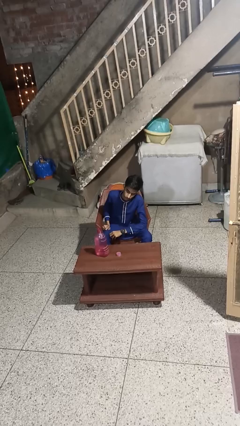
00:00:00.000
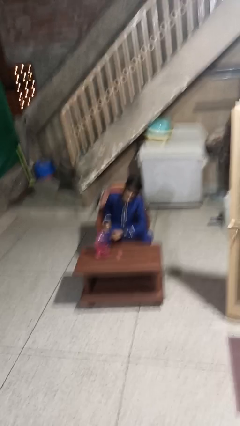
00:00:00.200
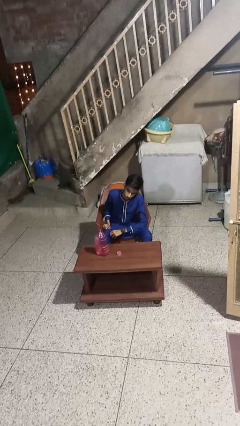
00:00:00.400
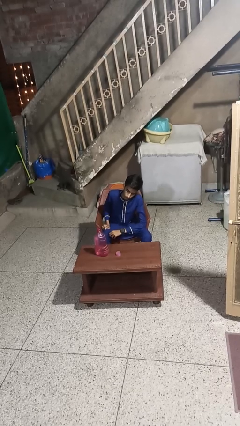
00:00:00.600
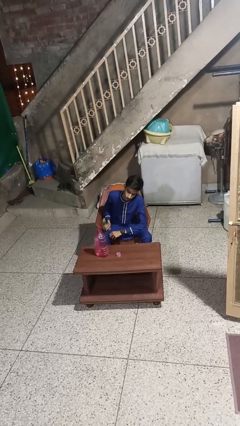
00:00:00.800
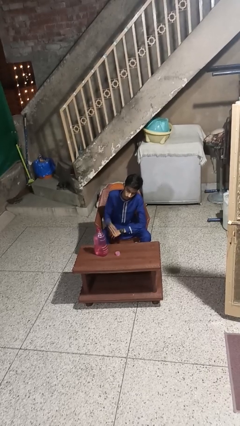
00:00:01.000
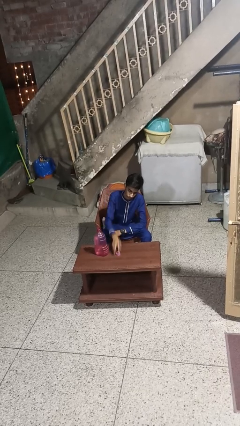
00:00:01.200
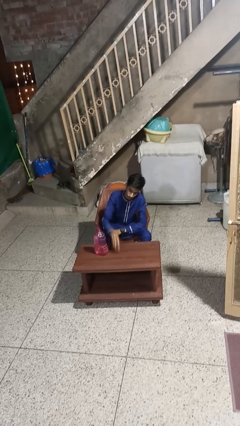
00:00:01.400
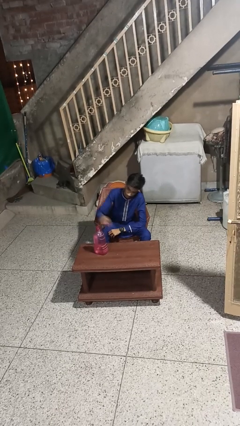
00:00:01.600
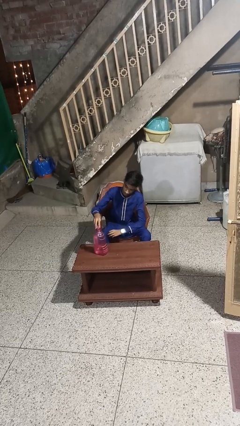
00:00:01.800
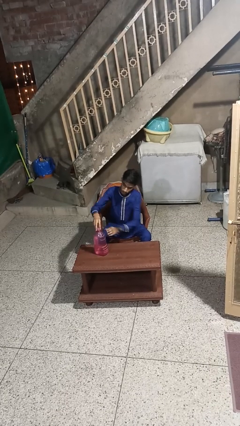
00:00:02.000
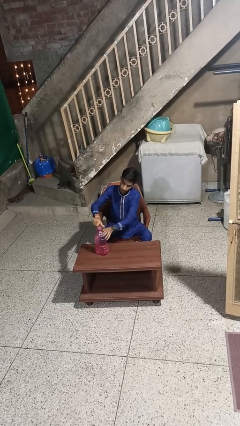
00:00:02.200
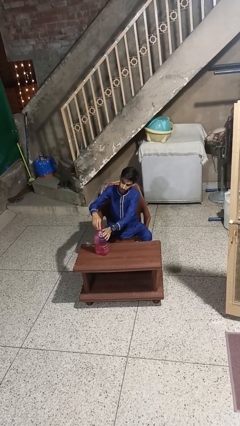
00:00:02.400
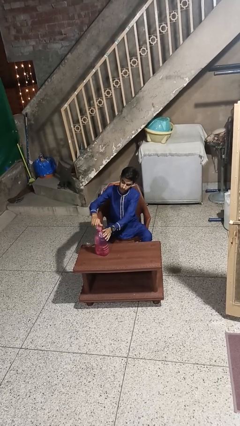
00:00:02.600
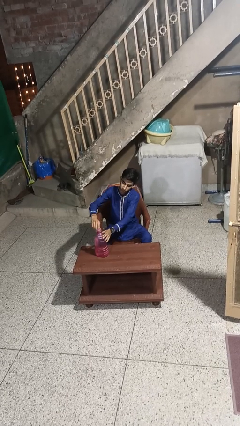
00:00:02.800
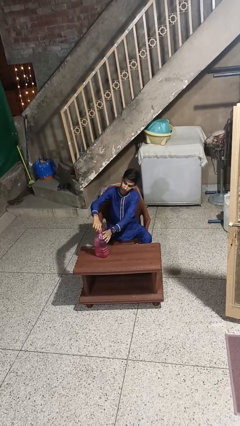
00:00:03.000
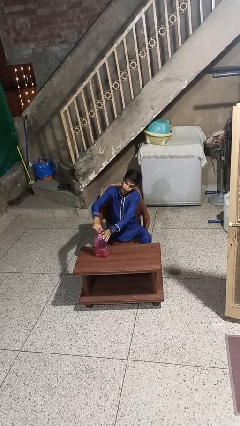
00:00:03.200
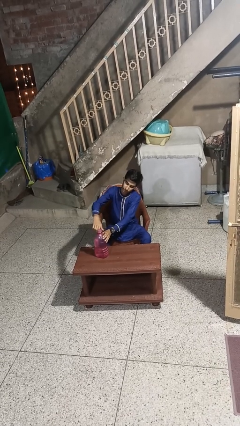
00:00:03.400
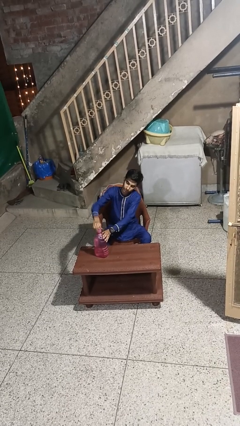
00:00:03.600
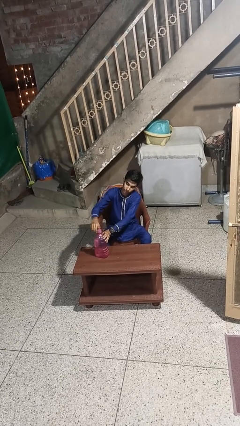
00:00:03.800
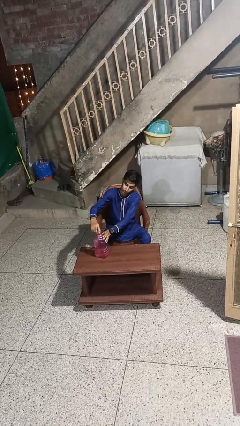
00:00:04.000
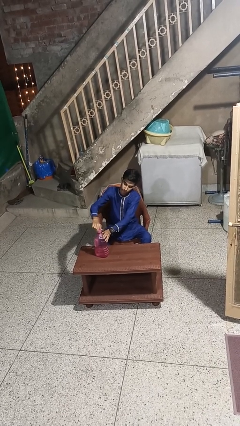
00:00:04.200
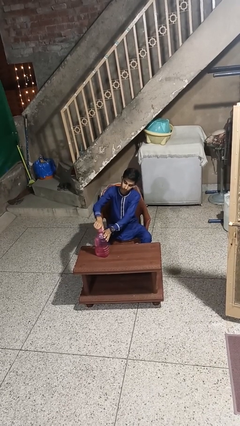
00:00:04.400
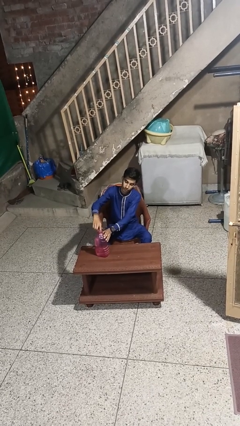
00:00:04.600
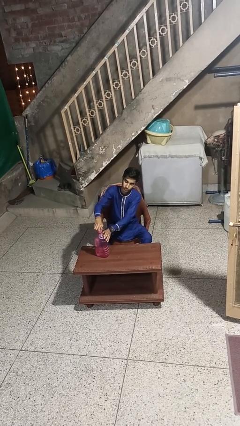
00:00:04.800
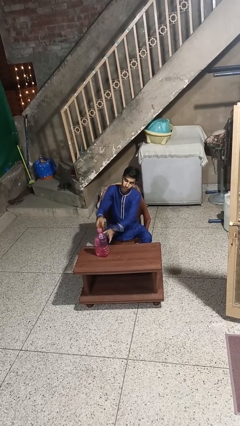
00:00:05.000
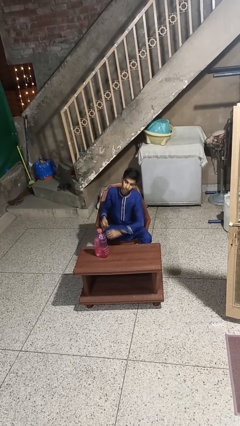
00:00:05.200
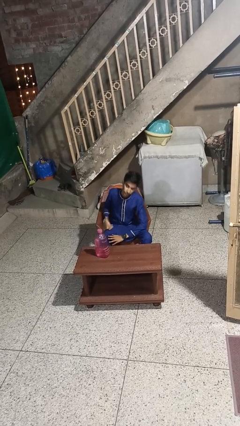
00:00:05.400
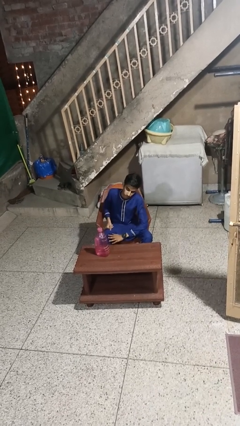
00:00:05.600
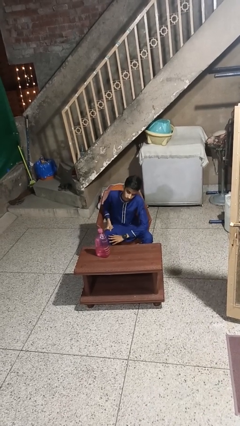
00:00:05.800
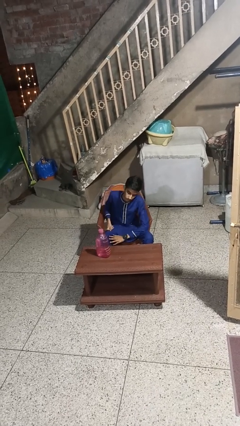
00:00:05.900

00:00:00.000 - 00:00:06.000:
person screws lid to bottle

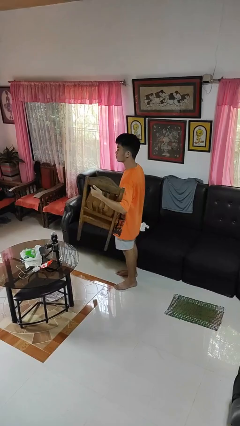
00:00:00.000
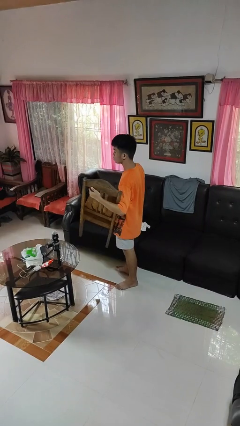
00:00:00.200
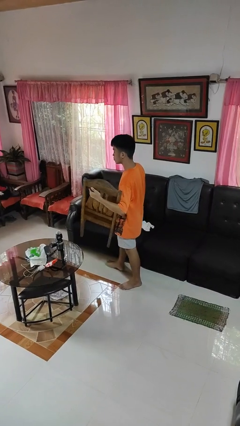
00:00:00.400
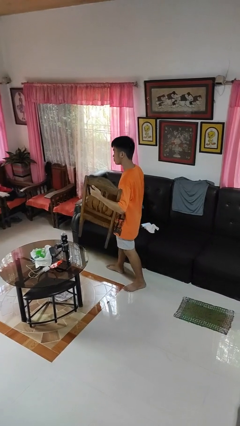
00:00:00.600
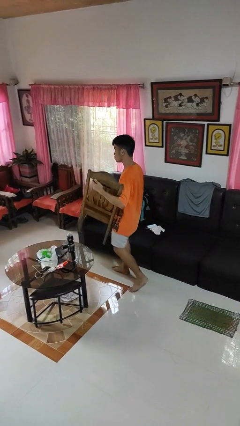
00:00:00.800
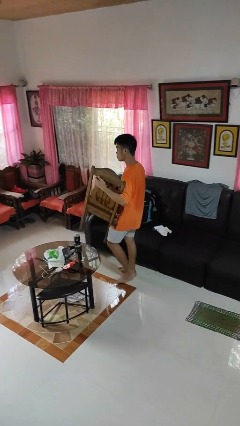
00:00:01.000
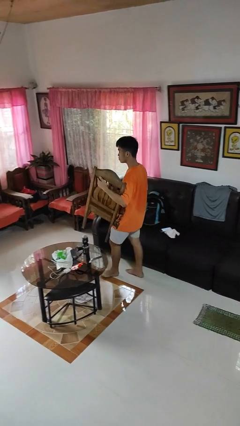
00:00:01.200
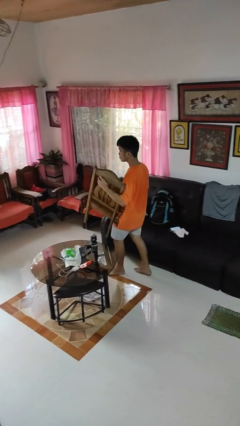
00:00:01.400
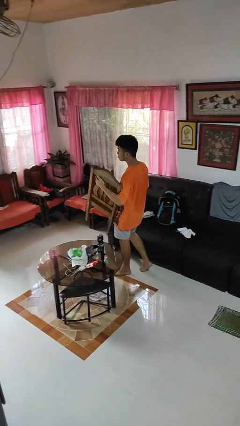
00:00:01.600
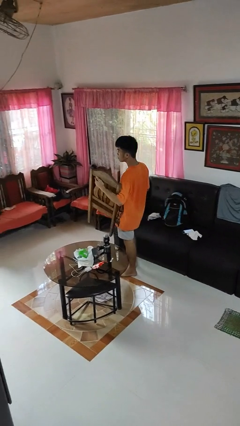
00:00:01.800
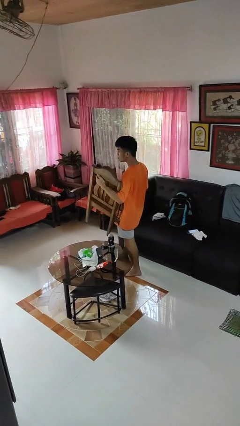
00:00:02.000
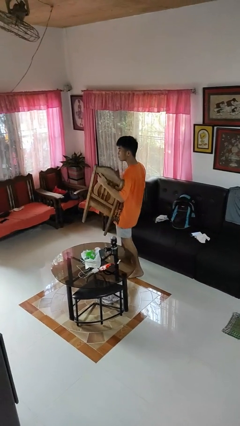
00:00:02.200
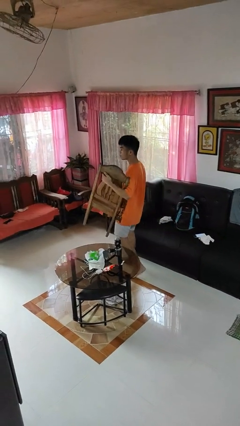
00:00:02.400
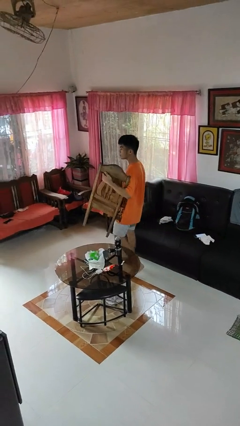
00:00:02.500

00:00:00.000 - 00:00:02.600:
person carries furniture

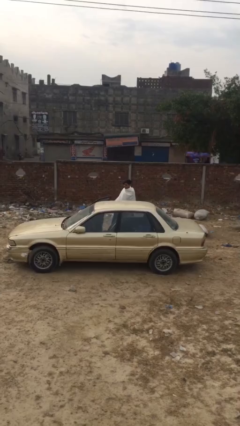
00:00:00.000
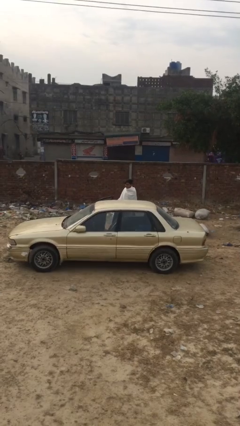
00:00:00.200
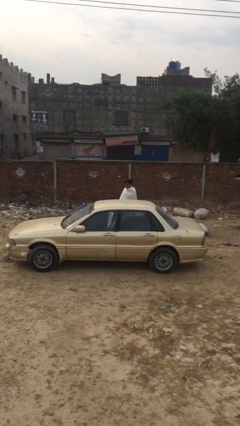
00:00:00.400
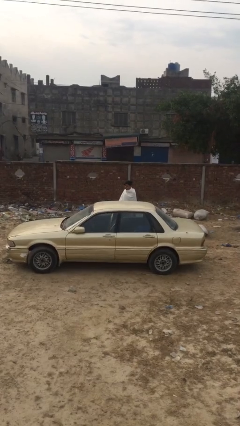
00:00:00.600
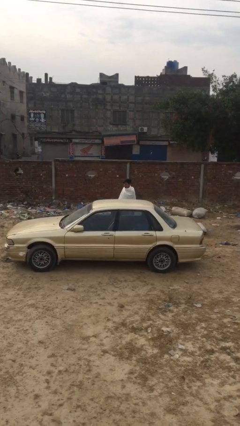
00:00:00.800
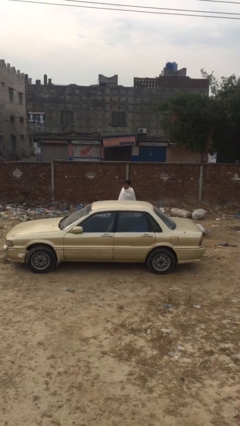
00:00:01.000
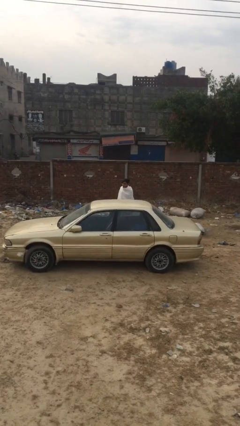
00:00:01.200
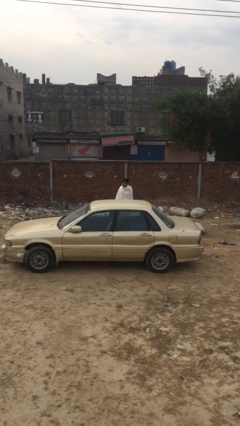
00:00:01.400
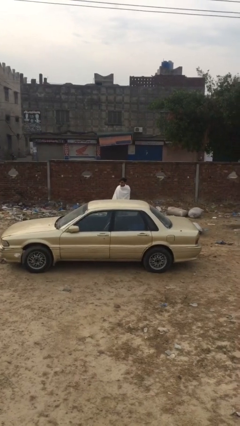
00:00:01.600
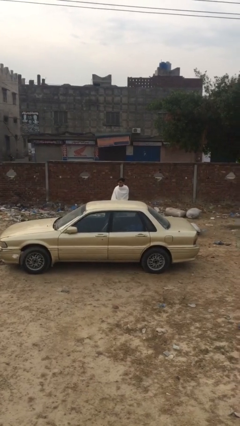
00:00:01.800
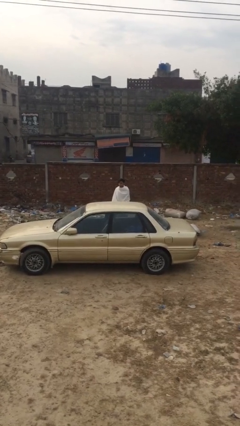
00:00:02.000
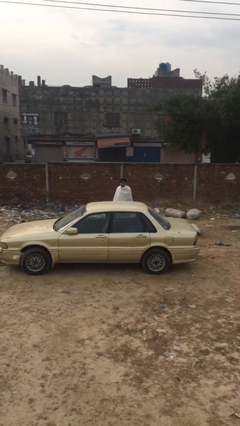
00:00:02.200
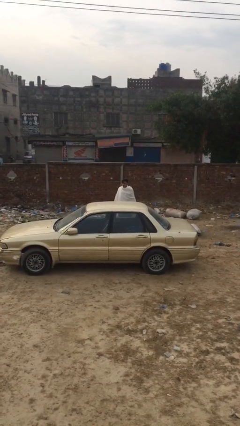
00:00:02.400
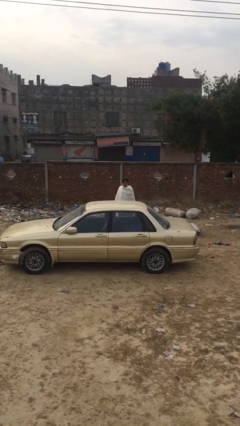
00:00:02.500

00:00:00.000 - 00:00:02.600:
person closes car door

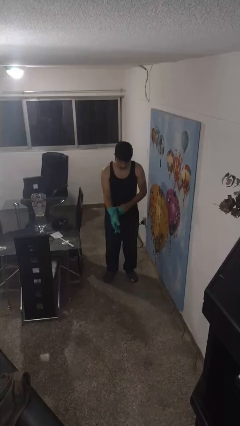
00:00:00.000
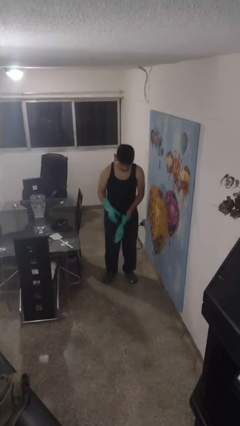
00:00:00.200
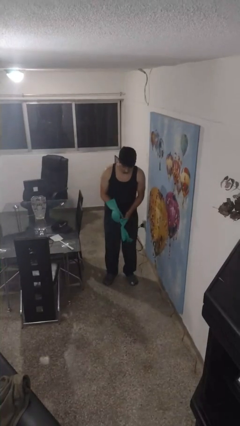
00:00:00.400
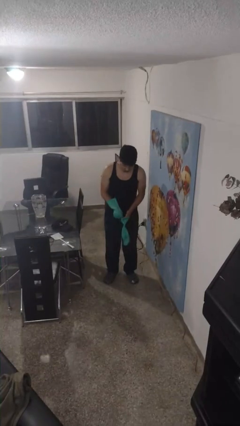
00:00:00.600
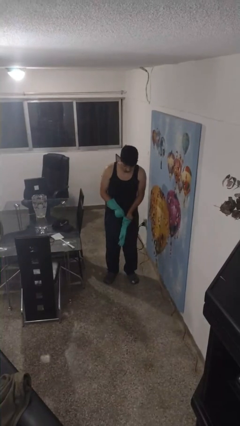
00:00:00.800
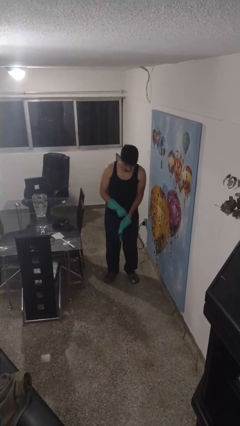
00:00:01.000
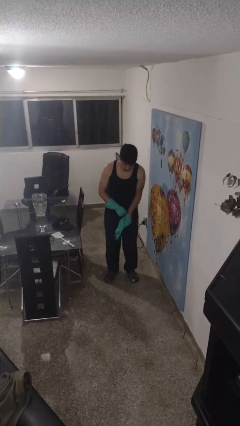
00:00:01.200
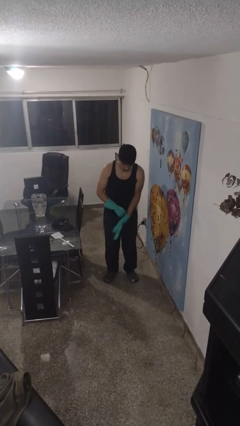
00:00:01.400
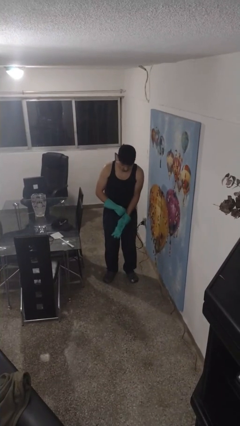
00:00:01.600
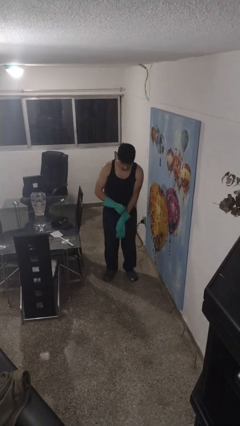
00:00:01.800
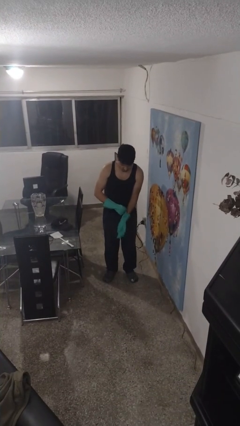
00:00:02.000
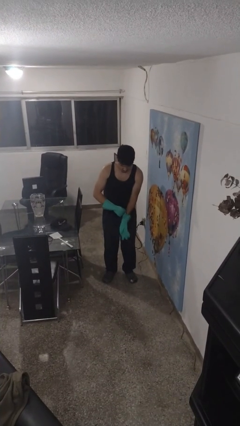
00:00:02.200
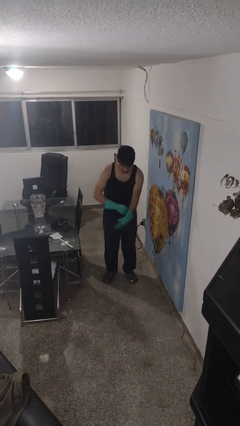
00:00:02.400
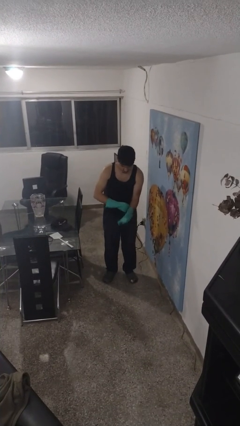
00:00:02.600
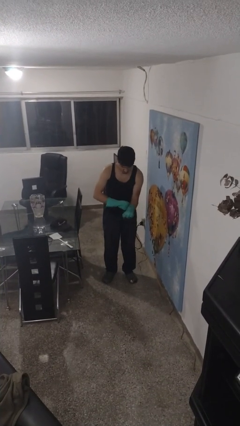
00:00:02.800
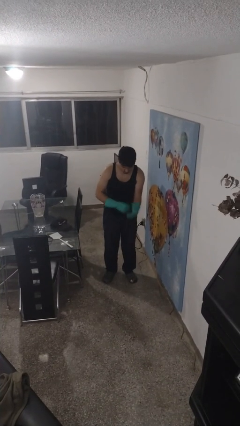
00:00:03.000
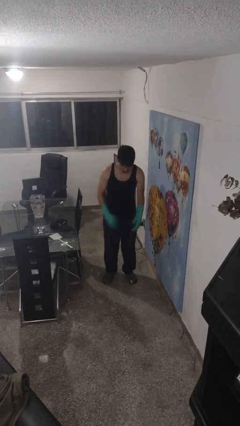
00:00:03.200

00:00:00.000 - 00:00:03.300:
person puts on gloves

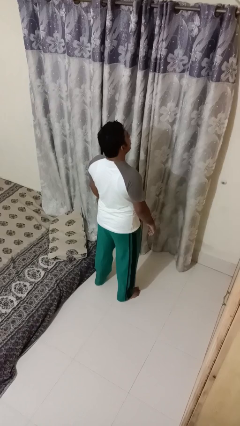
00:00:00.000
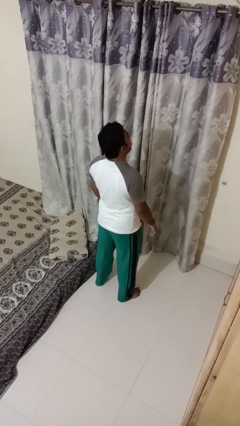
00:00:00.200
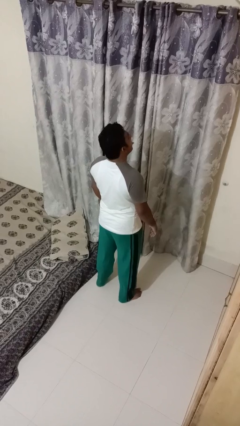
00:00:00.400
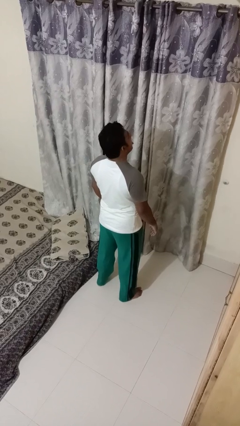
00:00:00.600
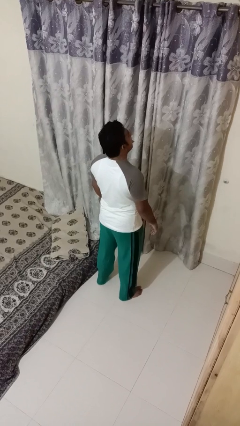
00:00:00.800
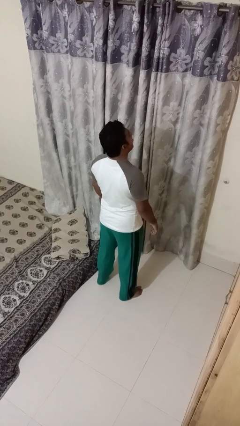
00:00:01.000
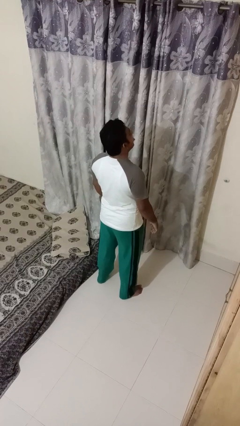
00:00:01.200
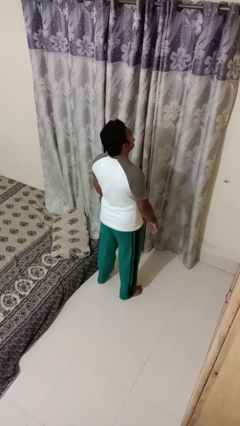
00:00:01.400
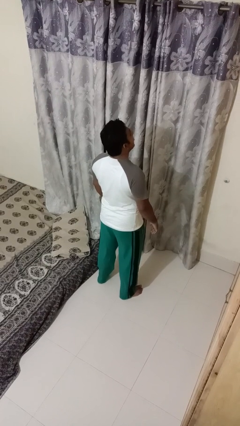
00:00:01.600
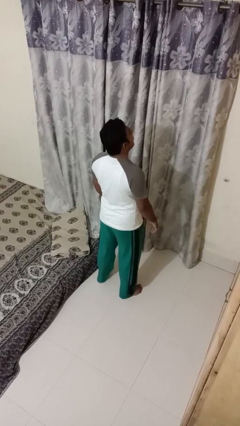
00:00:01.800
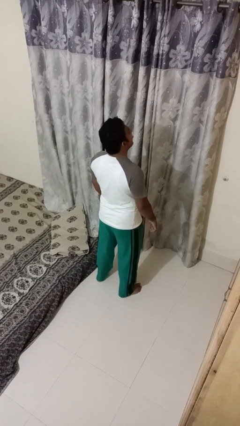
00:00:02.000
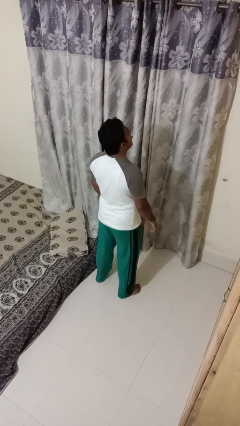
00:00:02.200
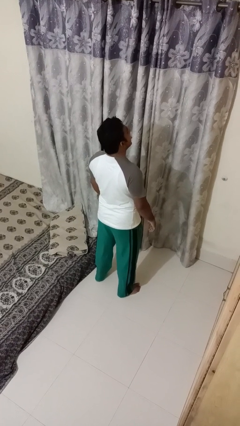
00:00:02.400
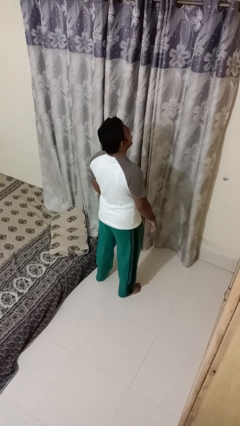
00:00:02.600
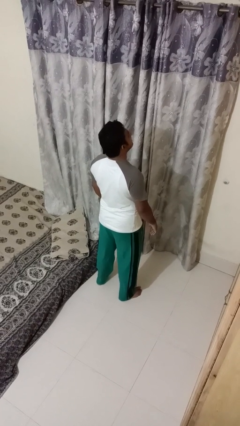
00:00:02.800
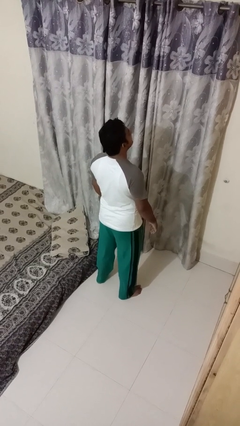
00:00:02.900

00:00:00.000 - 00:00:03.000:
person sticks out tongue
